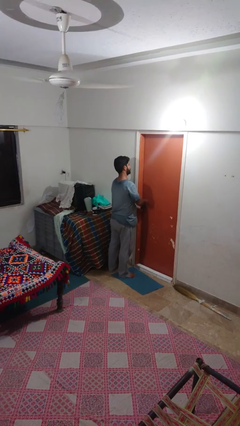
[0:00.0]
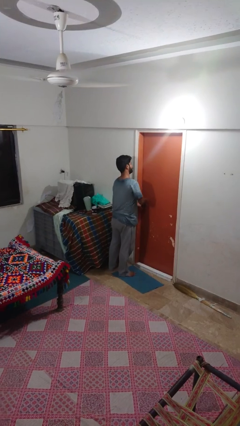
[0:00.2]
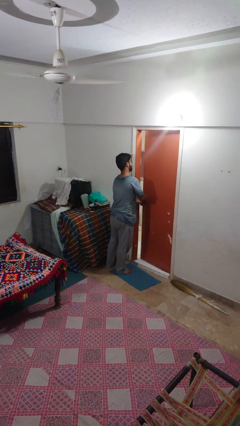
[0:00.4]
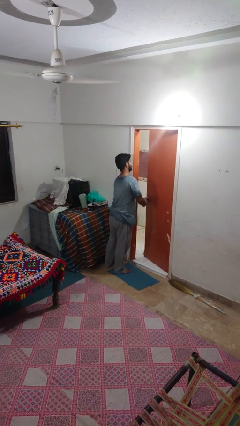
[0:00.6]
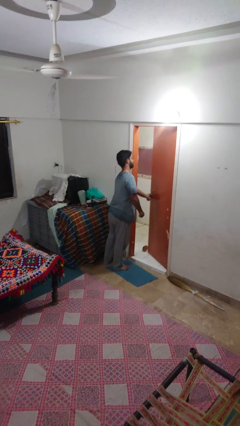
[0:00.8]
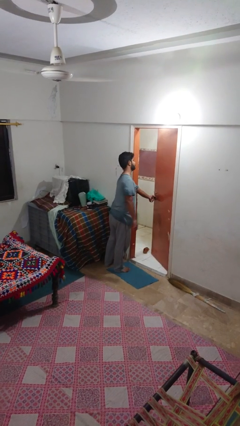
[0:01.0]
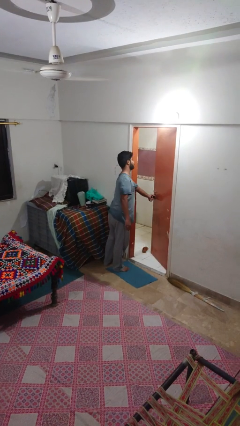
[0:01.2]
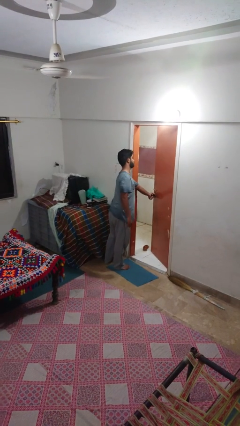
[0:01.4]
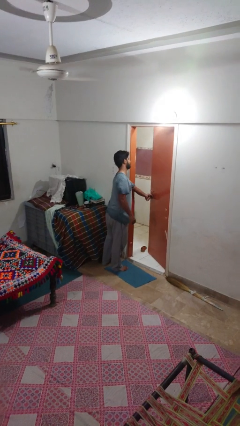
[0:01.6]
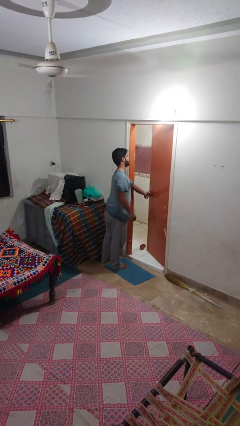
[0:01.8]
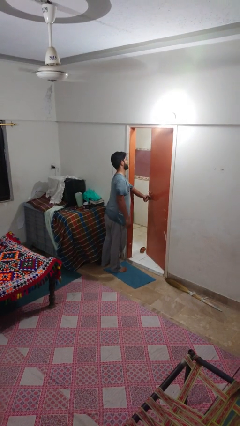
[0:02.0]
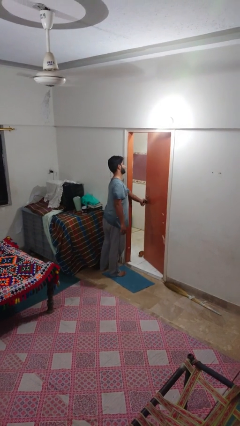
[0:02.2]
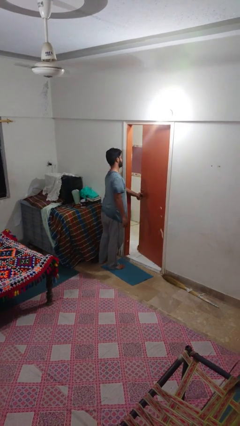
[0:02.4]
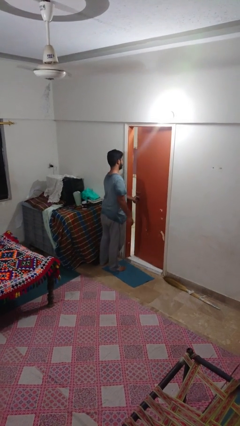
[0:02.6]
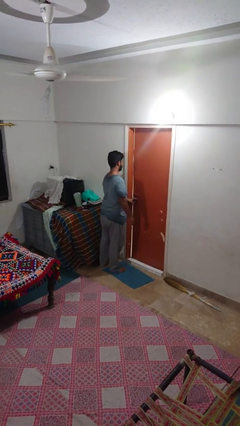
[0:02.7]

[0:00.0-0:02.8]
person opens facility door

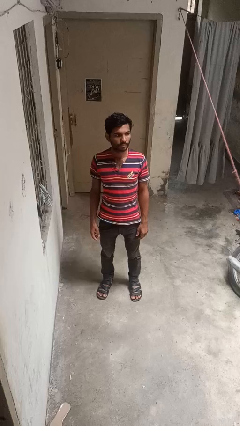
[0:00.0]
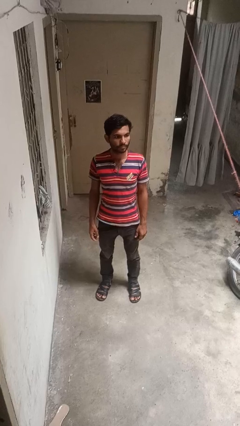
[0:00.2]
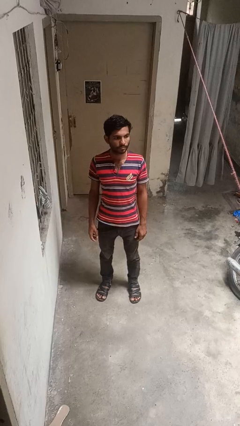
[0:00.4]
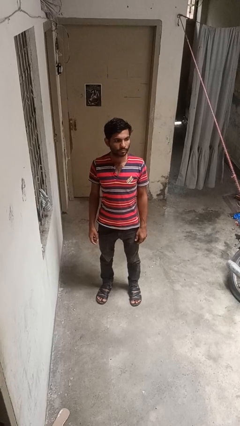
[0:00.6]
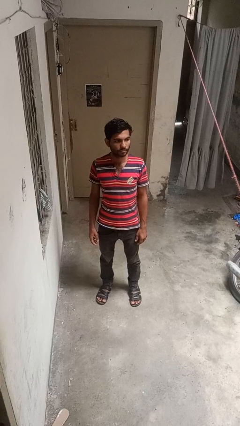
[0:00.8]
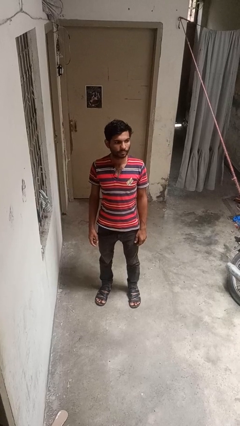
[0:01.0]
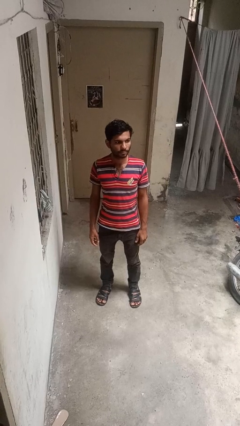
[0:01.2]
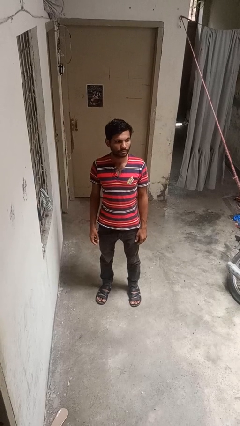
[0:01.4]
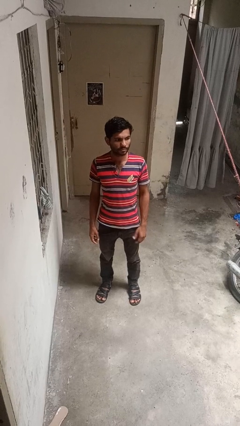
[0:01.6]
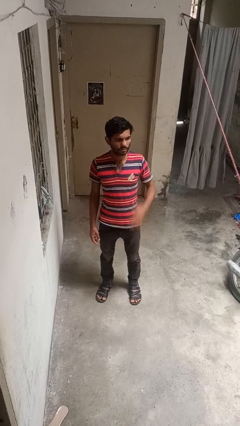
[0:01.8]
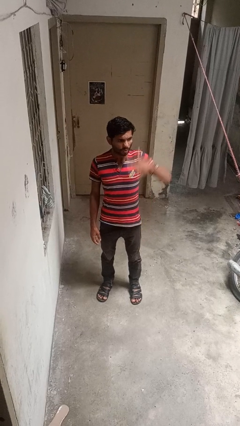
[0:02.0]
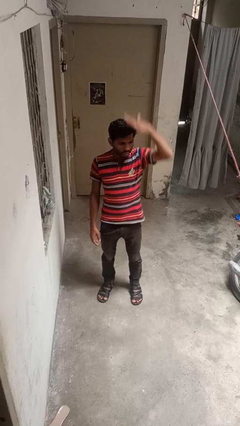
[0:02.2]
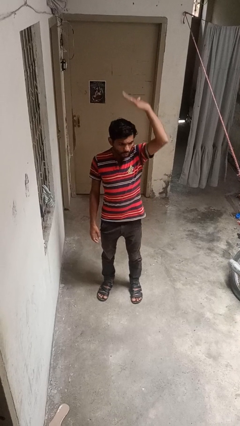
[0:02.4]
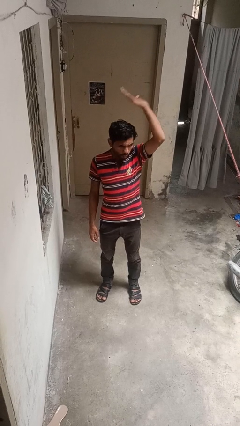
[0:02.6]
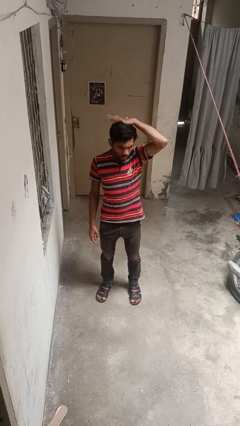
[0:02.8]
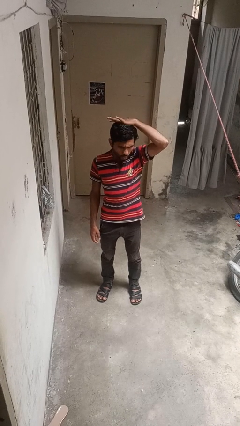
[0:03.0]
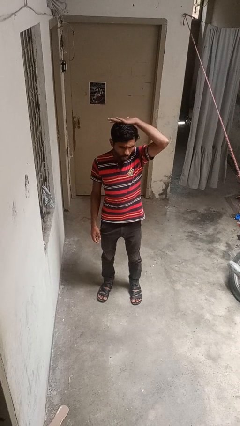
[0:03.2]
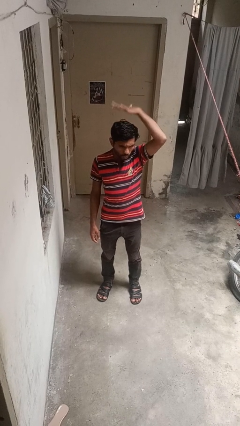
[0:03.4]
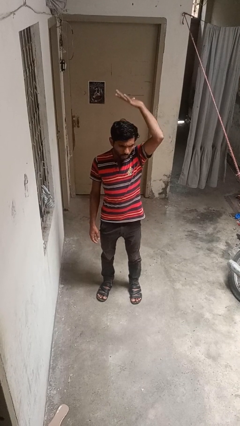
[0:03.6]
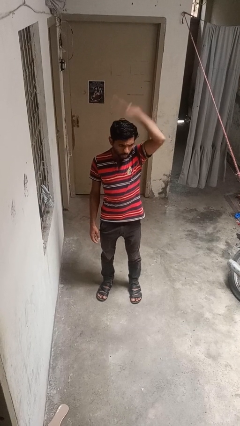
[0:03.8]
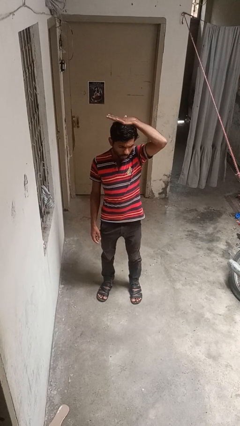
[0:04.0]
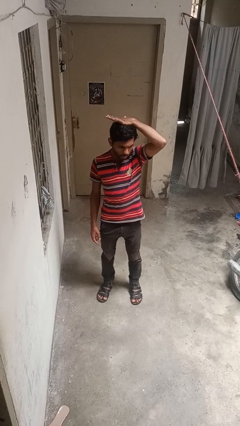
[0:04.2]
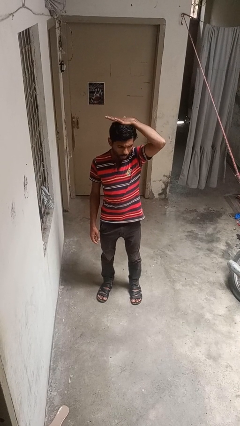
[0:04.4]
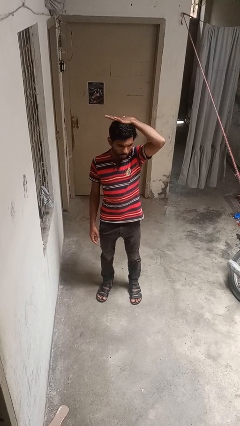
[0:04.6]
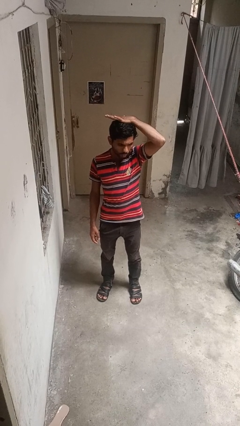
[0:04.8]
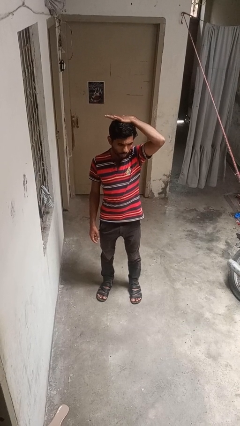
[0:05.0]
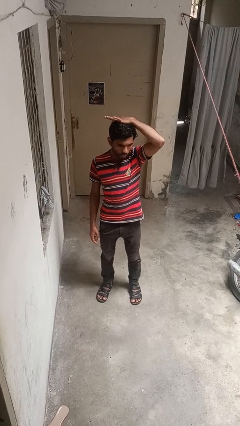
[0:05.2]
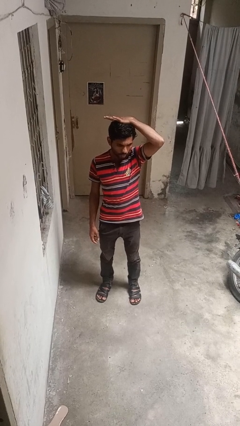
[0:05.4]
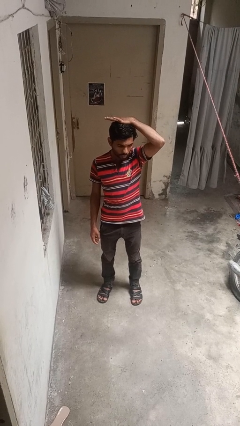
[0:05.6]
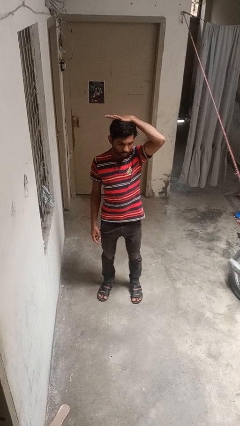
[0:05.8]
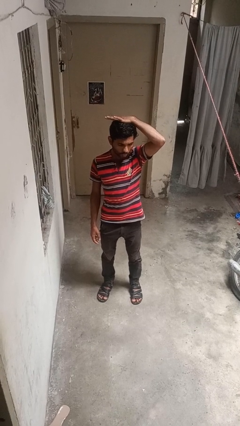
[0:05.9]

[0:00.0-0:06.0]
person pats head

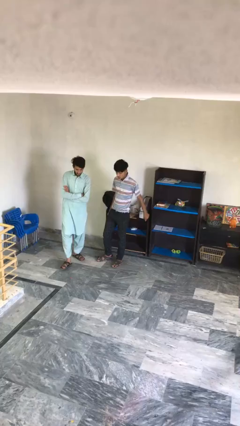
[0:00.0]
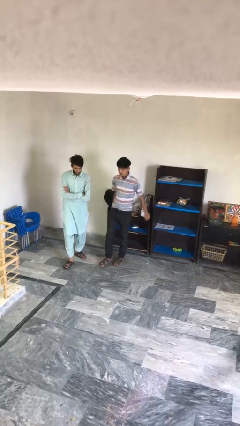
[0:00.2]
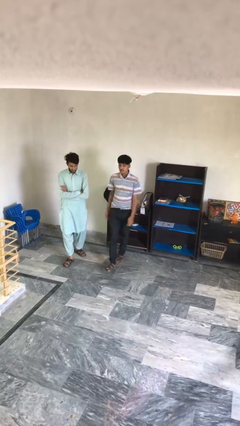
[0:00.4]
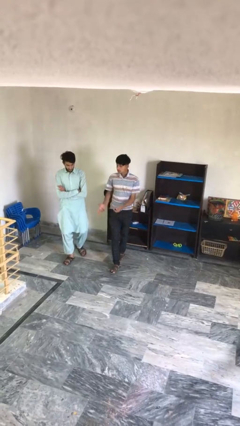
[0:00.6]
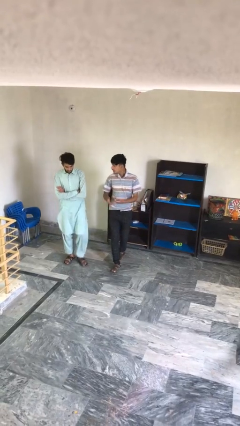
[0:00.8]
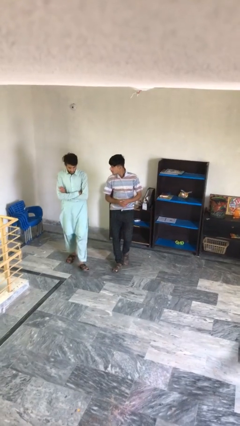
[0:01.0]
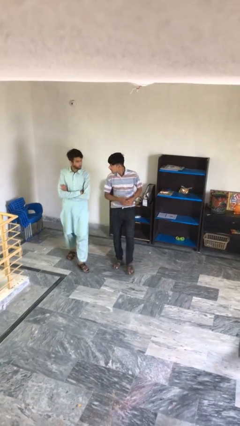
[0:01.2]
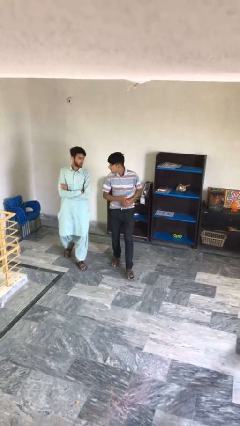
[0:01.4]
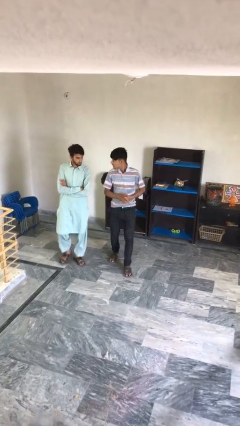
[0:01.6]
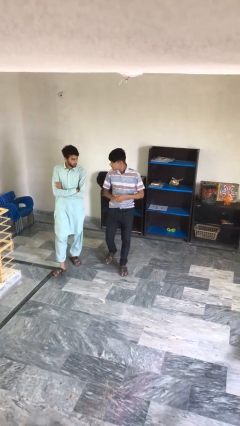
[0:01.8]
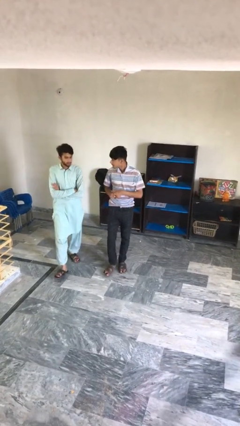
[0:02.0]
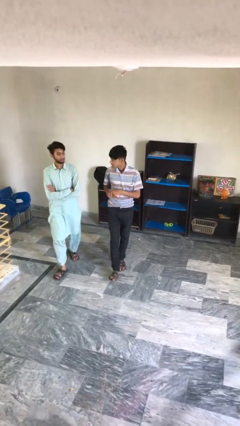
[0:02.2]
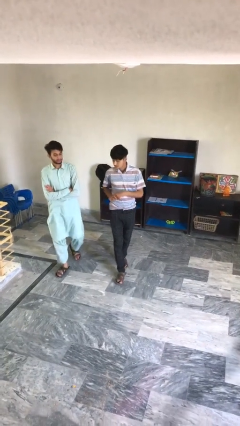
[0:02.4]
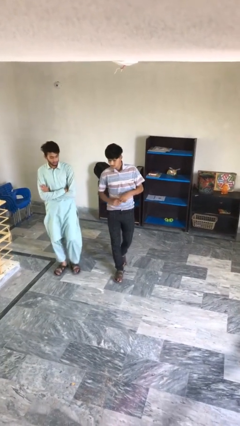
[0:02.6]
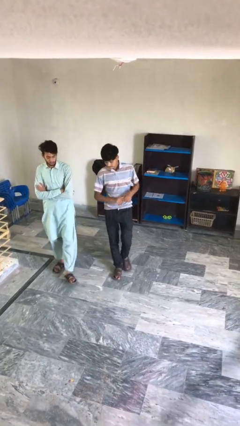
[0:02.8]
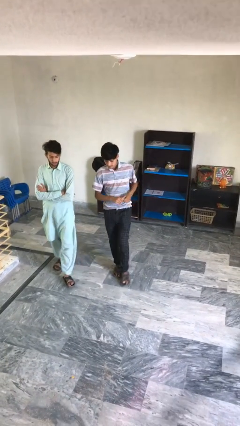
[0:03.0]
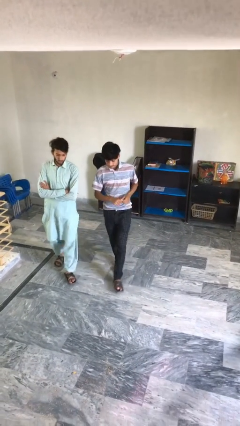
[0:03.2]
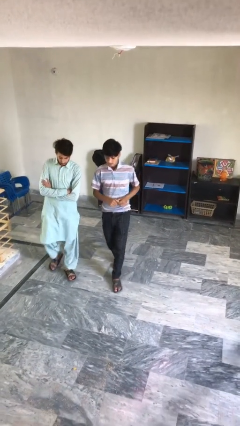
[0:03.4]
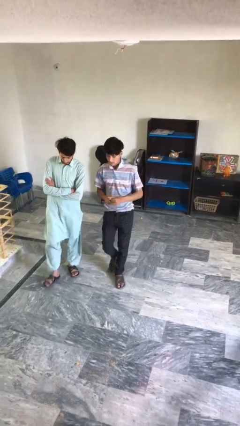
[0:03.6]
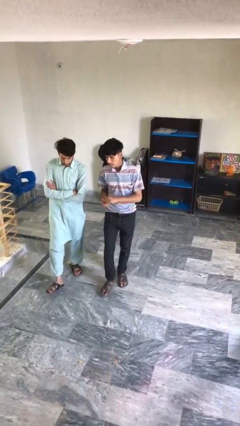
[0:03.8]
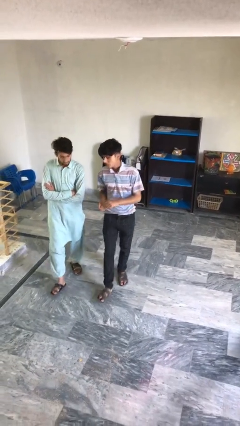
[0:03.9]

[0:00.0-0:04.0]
person talks to person

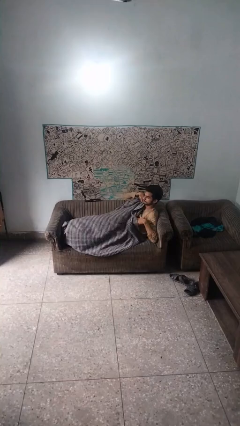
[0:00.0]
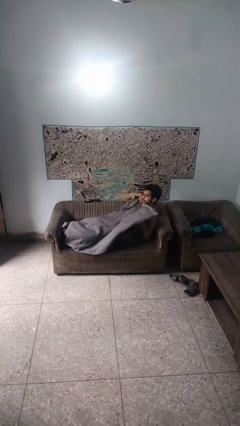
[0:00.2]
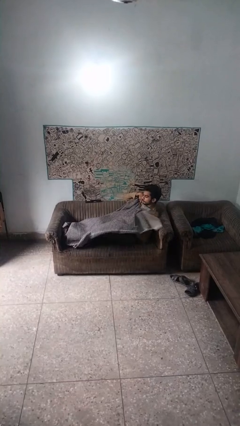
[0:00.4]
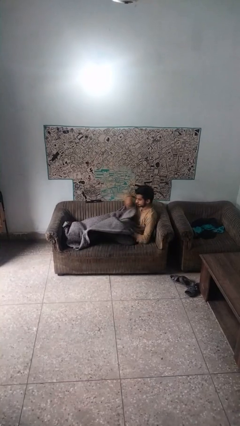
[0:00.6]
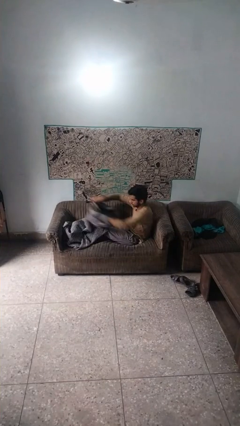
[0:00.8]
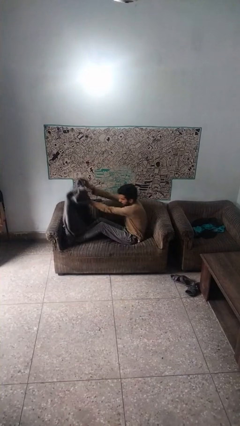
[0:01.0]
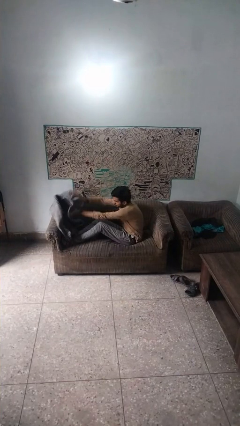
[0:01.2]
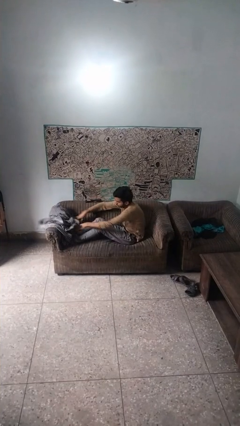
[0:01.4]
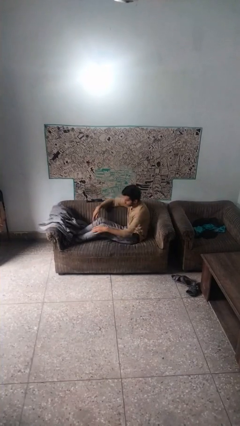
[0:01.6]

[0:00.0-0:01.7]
person uncovers with blanket

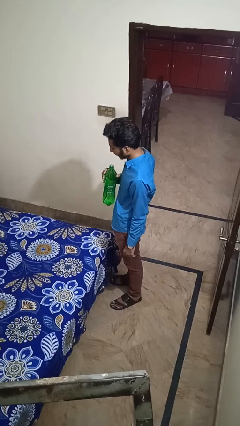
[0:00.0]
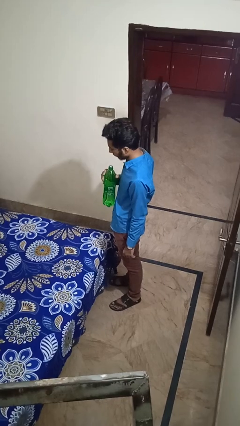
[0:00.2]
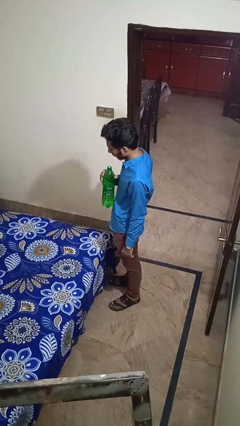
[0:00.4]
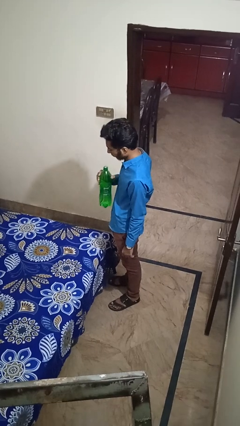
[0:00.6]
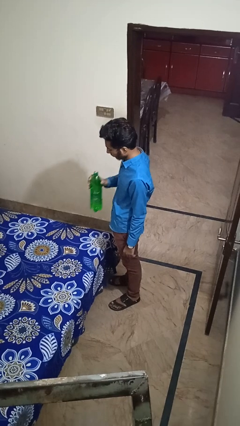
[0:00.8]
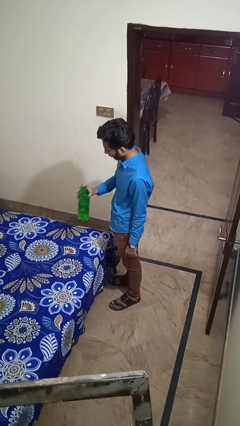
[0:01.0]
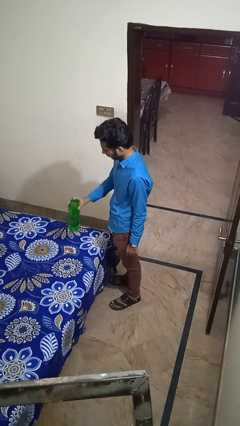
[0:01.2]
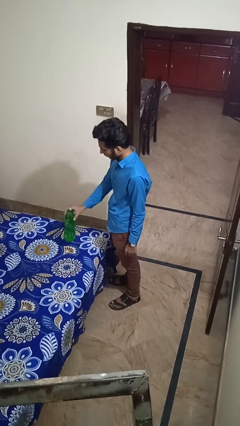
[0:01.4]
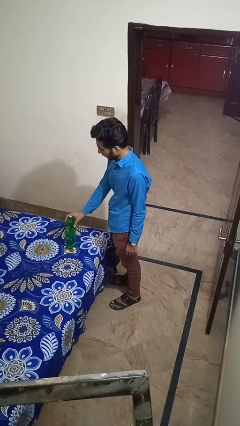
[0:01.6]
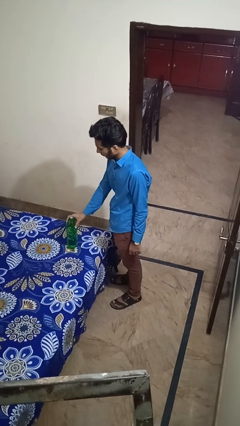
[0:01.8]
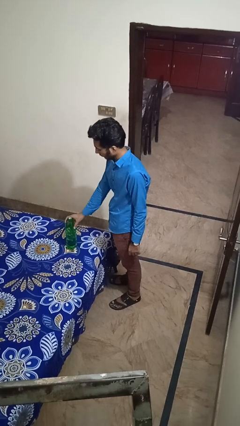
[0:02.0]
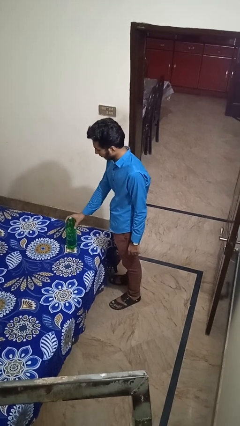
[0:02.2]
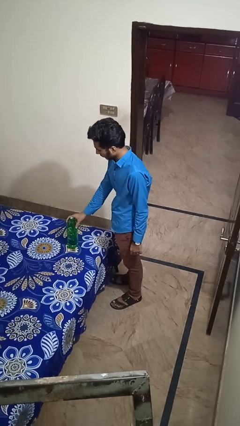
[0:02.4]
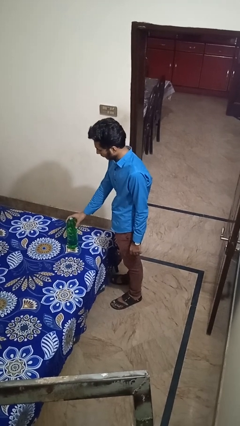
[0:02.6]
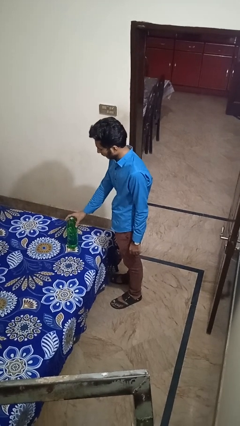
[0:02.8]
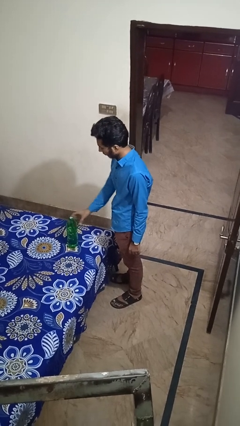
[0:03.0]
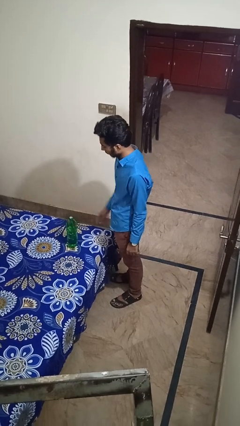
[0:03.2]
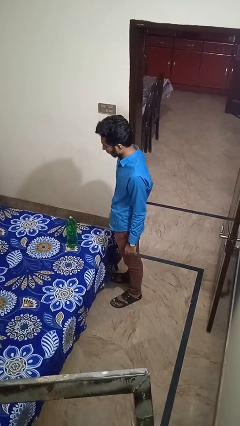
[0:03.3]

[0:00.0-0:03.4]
person puts down object on bed
